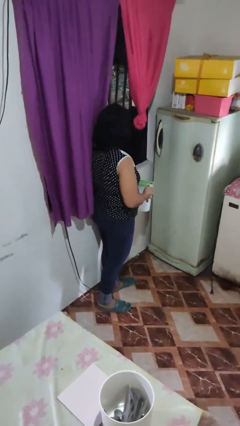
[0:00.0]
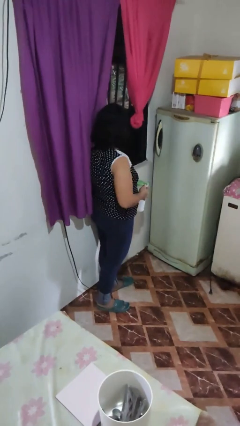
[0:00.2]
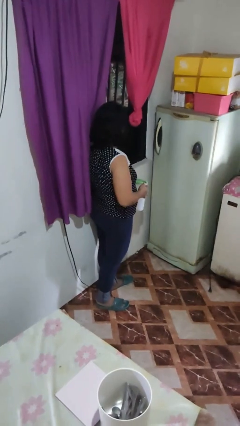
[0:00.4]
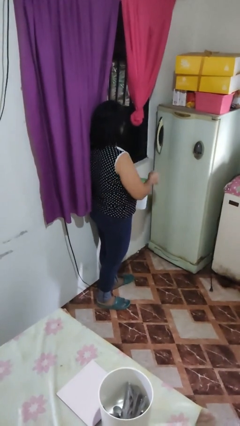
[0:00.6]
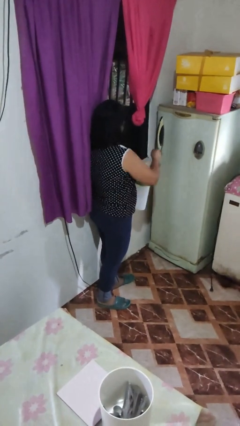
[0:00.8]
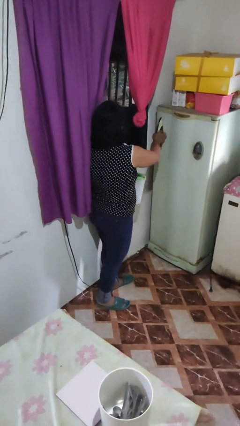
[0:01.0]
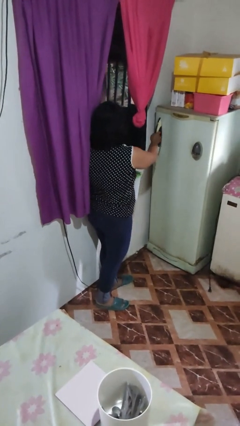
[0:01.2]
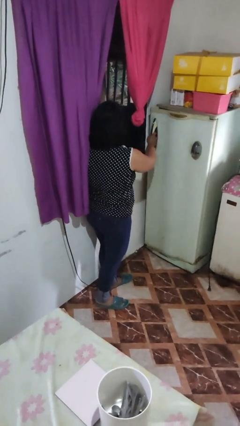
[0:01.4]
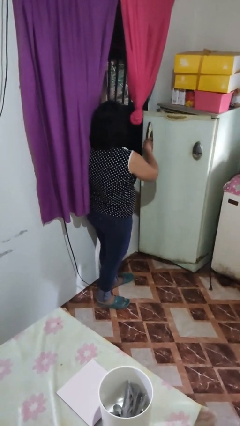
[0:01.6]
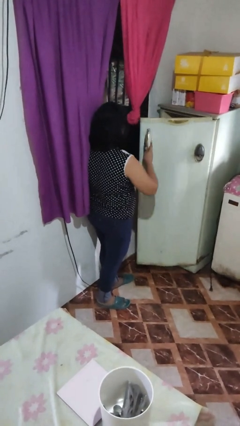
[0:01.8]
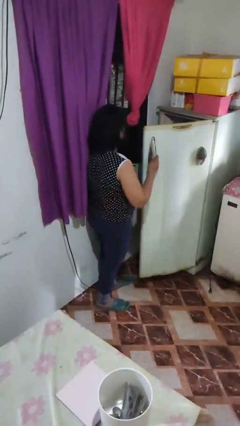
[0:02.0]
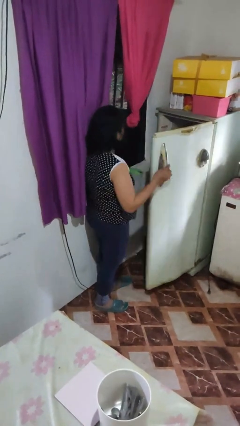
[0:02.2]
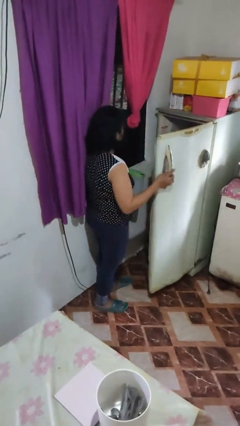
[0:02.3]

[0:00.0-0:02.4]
person opens refrigerator

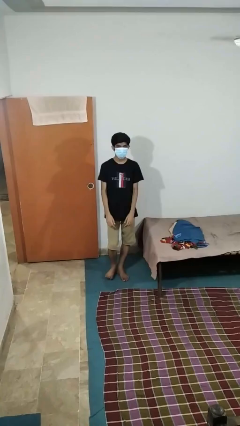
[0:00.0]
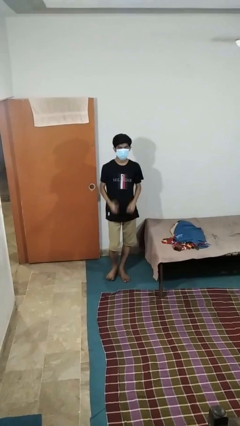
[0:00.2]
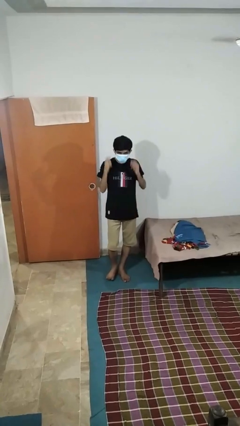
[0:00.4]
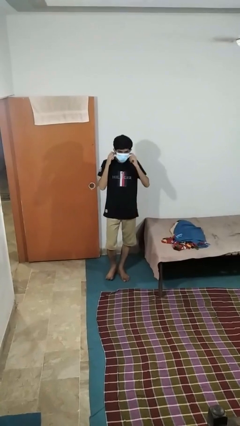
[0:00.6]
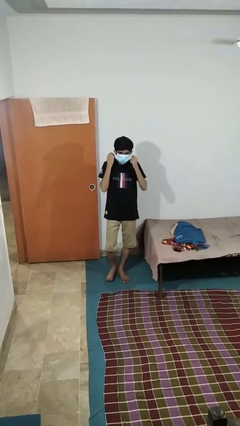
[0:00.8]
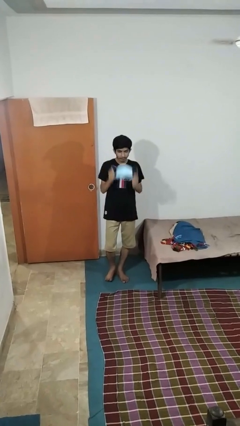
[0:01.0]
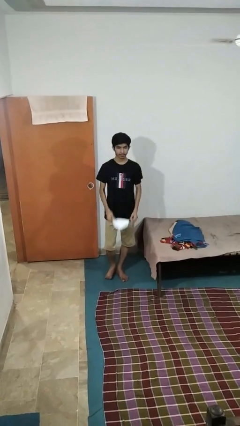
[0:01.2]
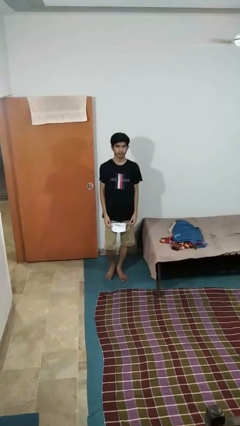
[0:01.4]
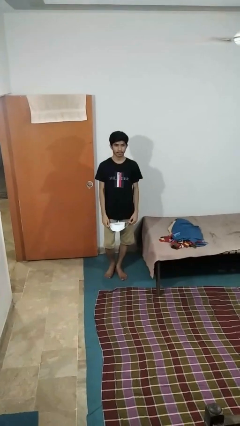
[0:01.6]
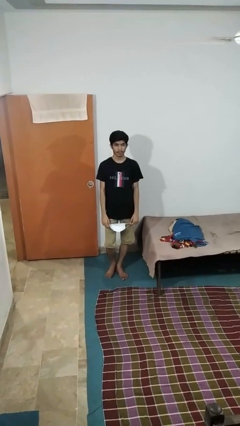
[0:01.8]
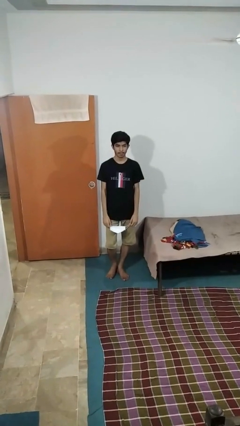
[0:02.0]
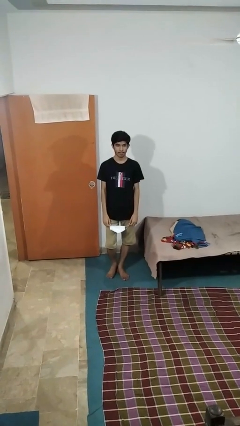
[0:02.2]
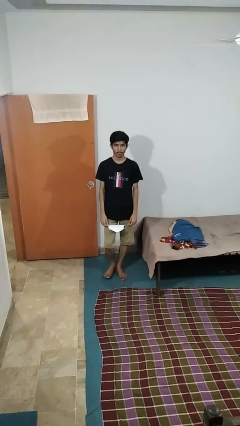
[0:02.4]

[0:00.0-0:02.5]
person takes off facemask

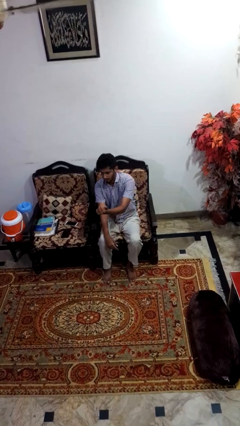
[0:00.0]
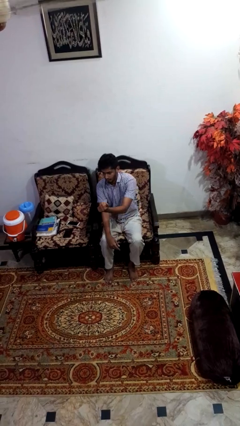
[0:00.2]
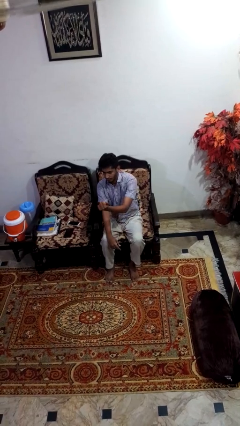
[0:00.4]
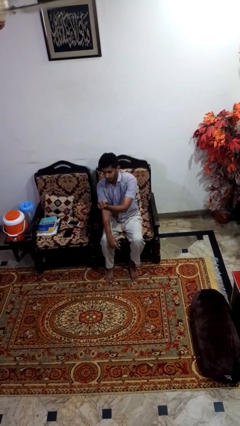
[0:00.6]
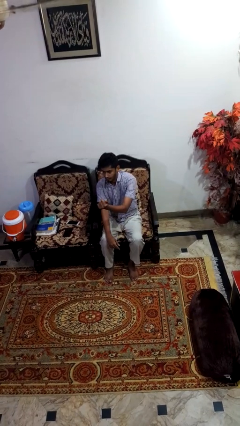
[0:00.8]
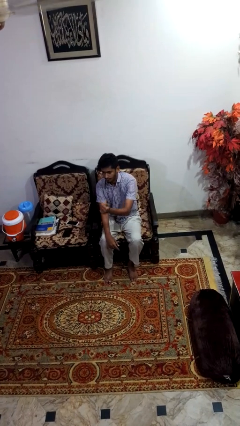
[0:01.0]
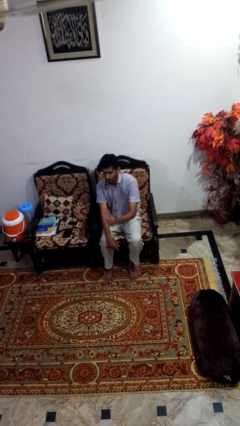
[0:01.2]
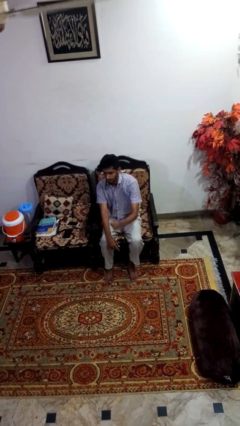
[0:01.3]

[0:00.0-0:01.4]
person gestures come here

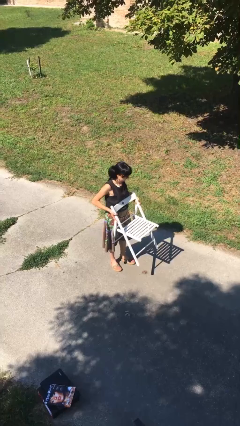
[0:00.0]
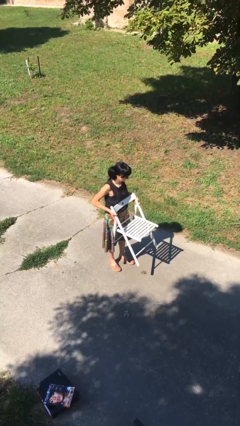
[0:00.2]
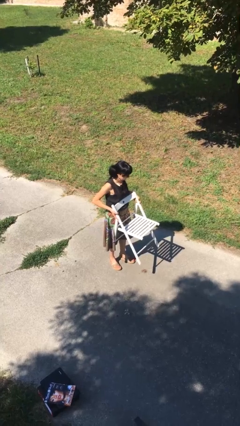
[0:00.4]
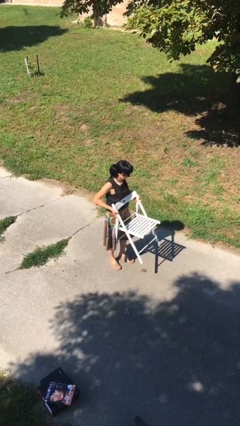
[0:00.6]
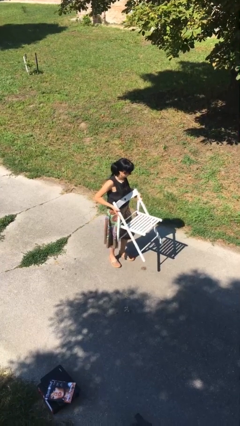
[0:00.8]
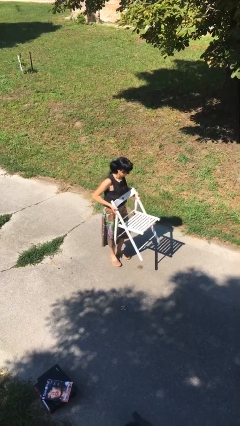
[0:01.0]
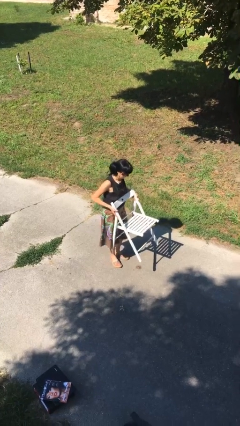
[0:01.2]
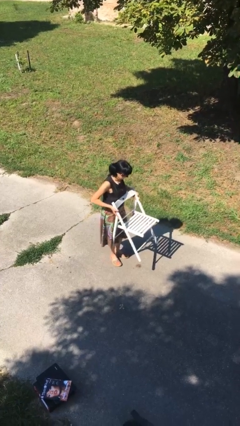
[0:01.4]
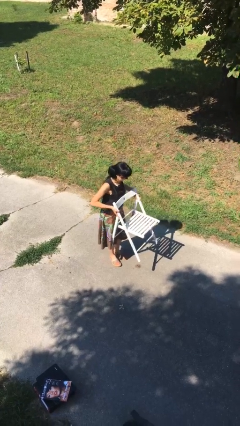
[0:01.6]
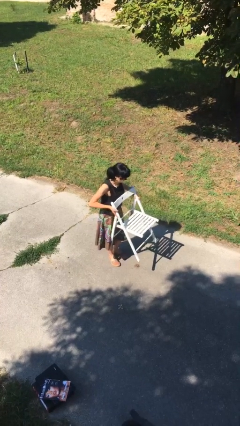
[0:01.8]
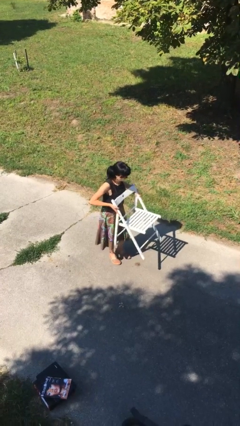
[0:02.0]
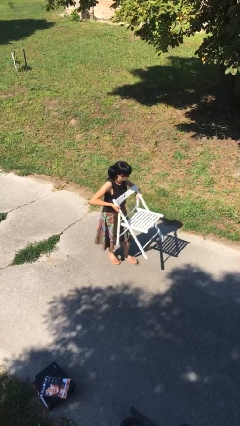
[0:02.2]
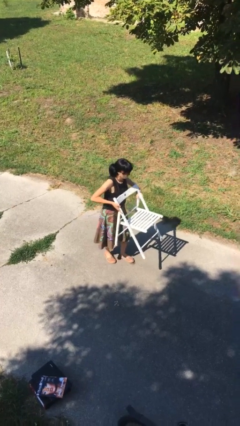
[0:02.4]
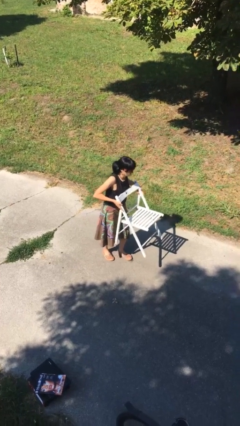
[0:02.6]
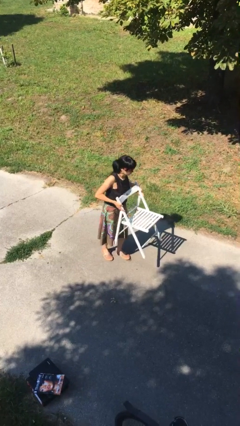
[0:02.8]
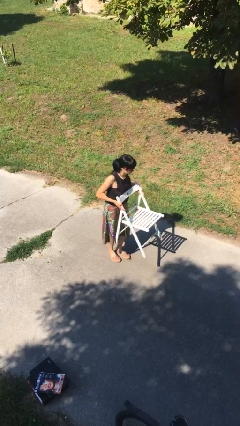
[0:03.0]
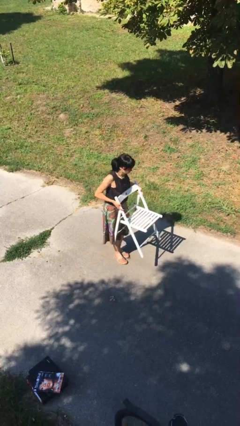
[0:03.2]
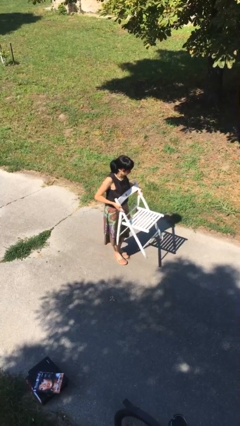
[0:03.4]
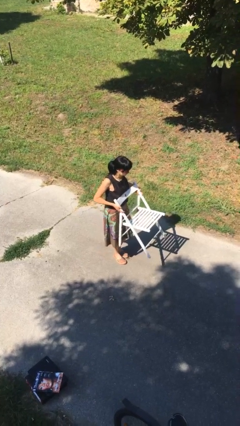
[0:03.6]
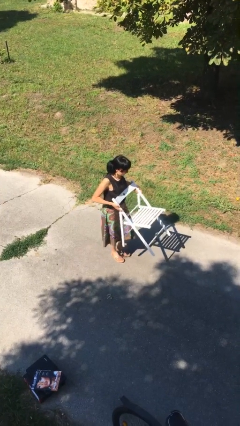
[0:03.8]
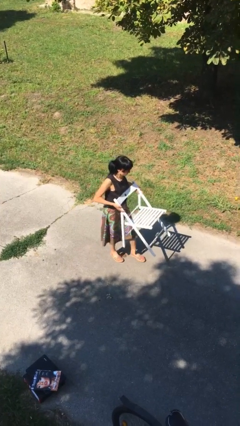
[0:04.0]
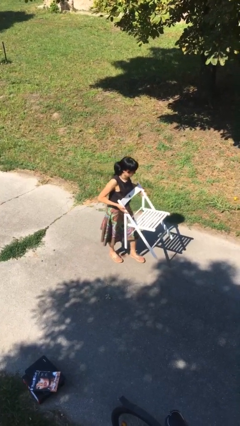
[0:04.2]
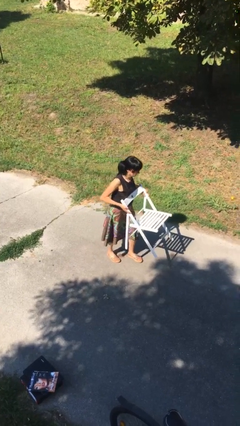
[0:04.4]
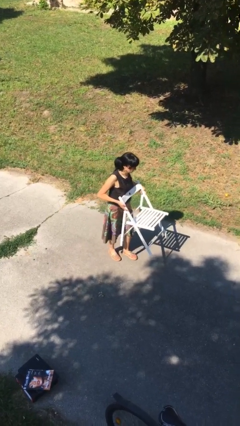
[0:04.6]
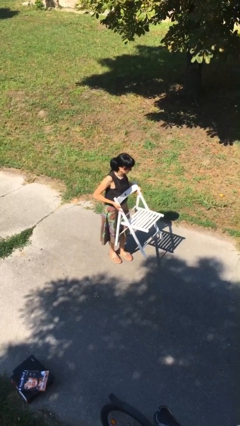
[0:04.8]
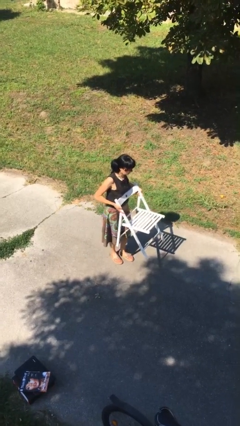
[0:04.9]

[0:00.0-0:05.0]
person carries heavy object

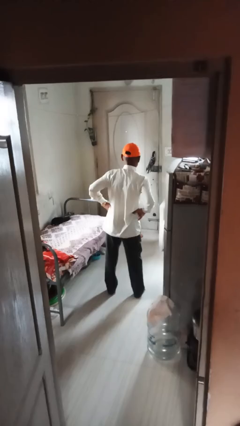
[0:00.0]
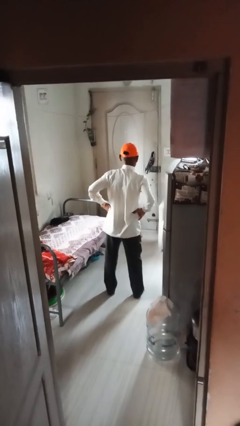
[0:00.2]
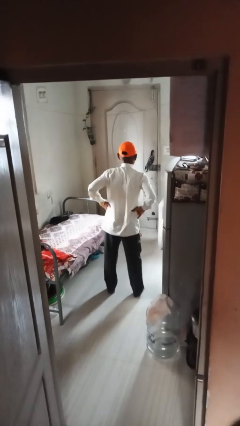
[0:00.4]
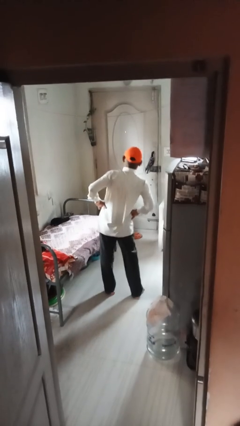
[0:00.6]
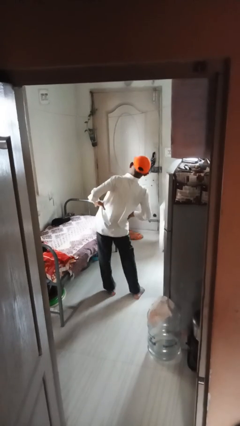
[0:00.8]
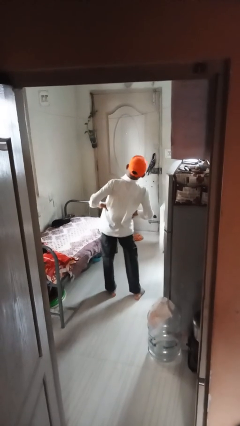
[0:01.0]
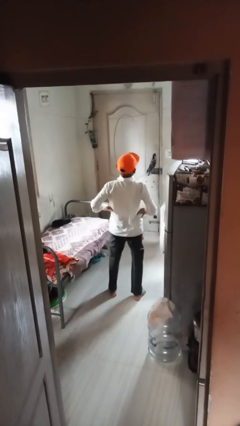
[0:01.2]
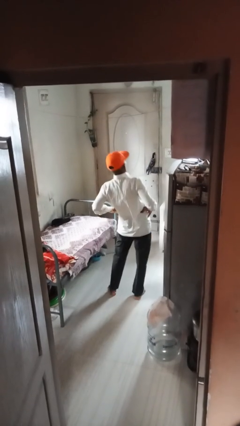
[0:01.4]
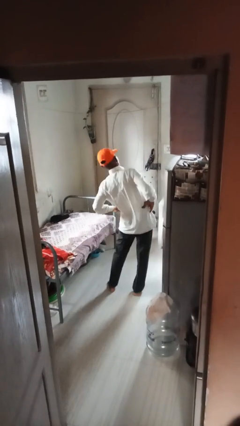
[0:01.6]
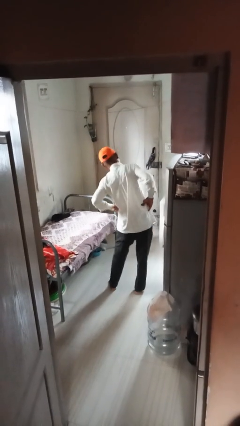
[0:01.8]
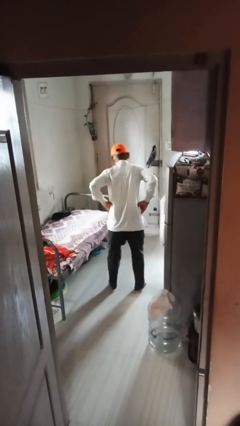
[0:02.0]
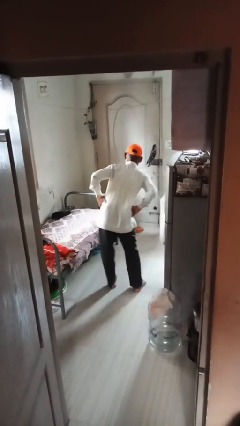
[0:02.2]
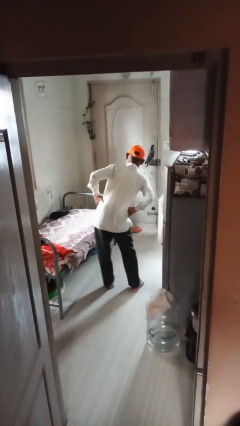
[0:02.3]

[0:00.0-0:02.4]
person wiggles hips

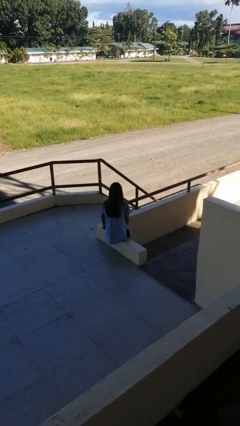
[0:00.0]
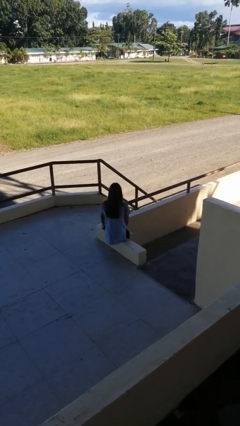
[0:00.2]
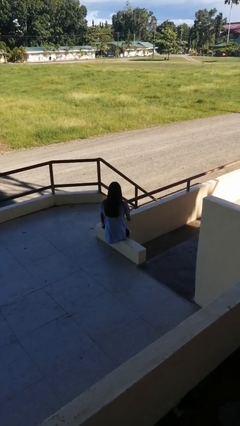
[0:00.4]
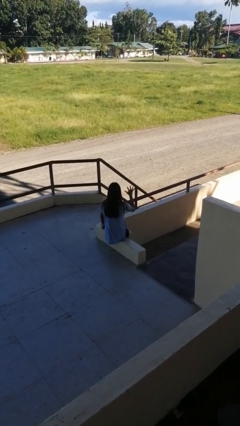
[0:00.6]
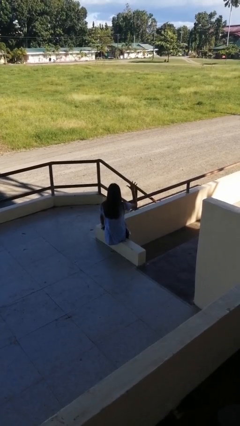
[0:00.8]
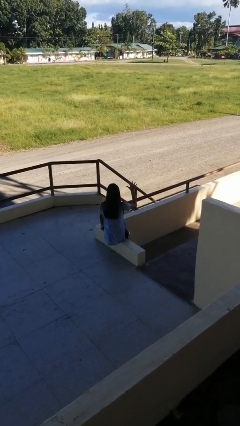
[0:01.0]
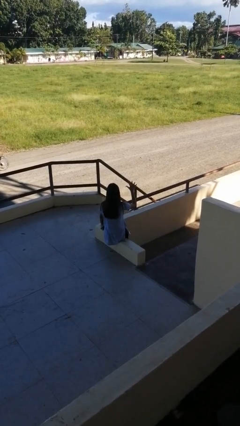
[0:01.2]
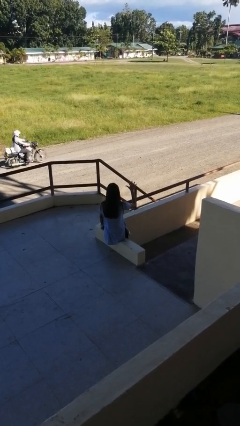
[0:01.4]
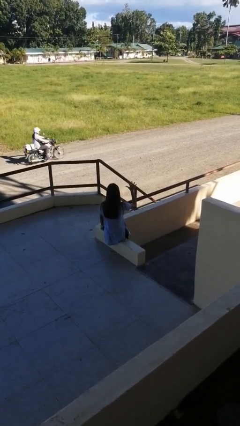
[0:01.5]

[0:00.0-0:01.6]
person gestures number five

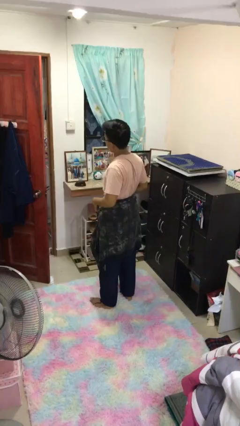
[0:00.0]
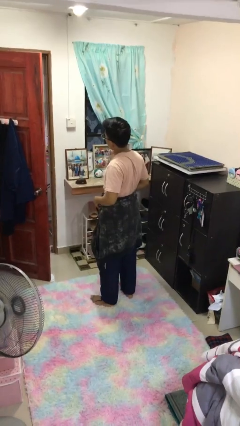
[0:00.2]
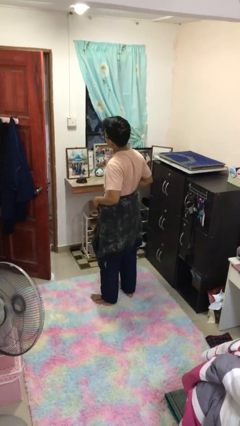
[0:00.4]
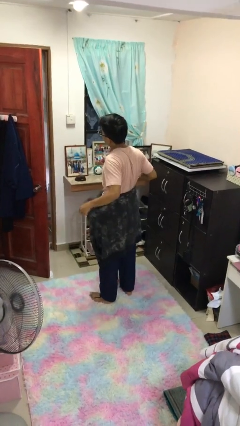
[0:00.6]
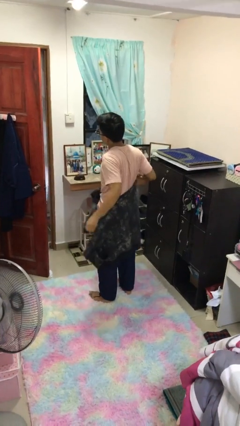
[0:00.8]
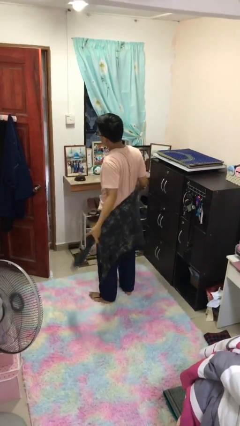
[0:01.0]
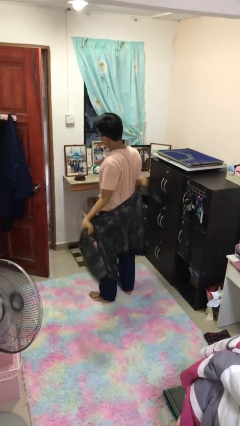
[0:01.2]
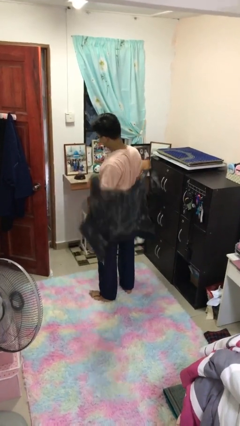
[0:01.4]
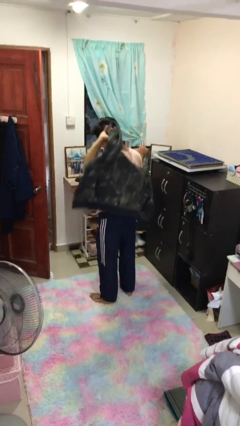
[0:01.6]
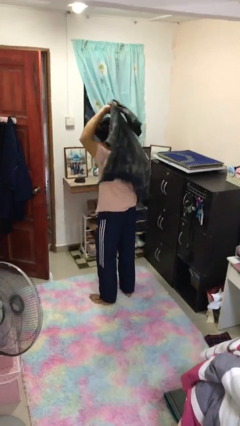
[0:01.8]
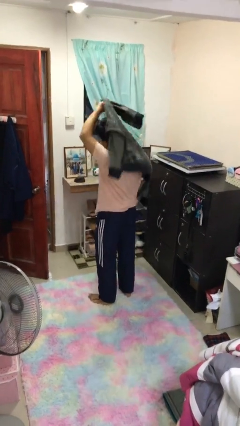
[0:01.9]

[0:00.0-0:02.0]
person unties jacket around waist
